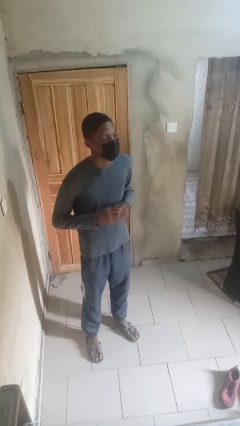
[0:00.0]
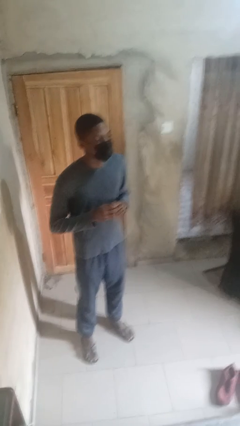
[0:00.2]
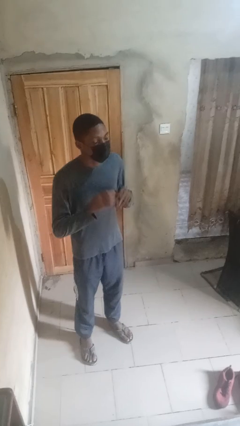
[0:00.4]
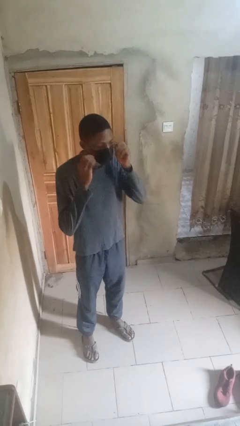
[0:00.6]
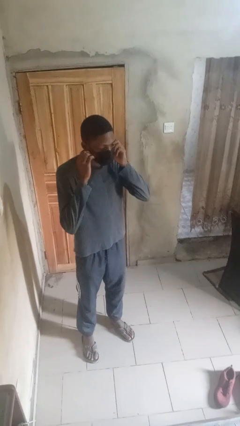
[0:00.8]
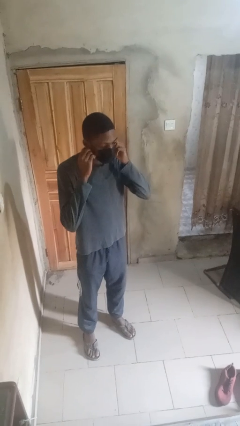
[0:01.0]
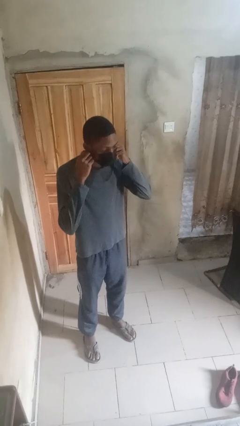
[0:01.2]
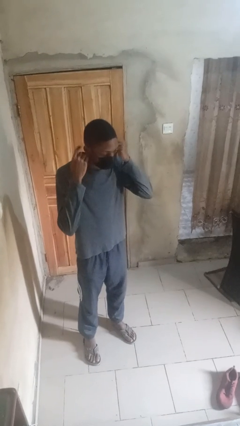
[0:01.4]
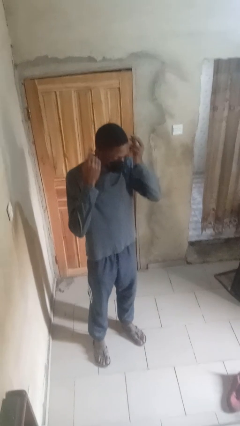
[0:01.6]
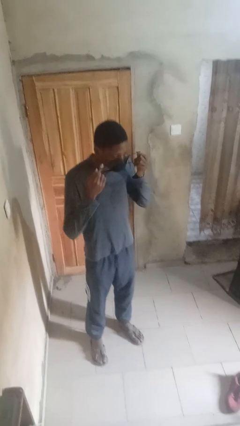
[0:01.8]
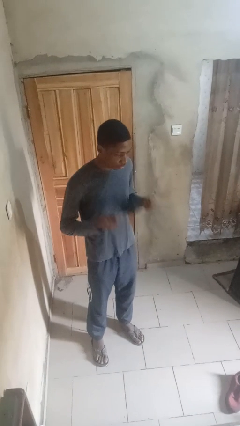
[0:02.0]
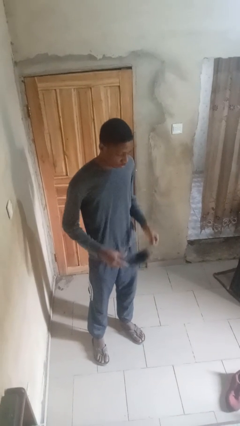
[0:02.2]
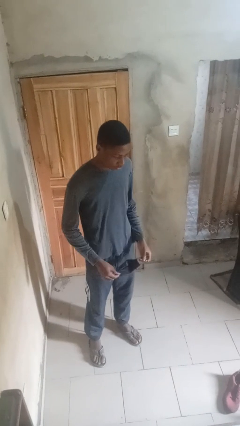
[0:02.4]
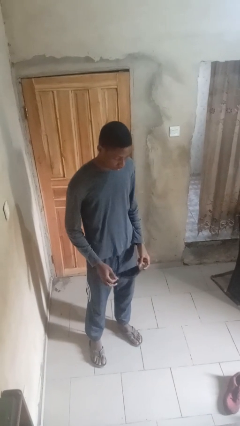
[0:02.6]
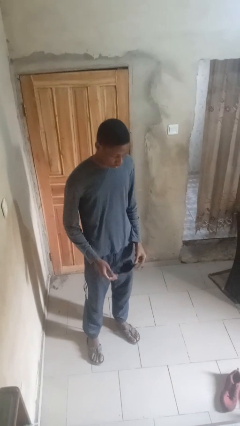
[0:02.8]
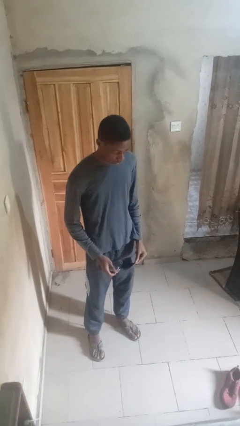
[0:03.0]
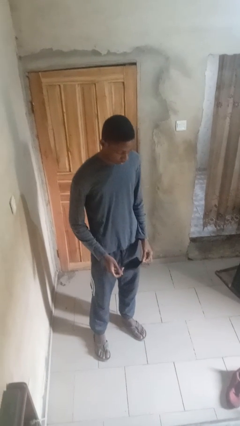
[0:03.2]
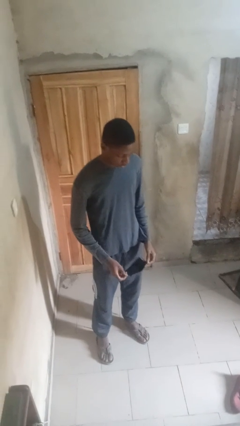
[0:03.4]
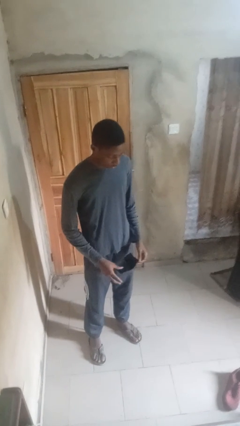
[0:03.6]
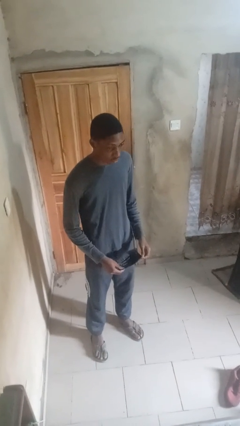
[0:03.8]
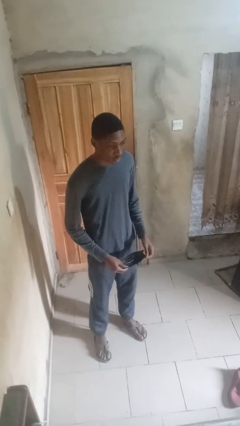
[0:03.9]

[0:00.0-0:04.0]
person takes off facemask

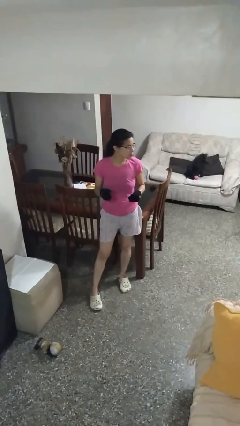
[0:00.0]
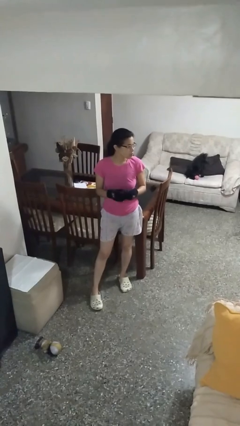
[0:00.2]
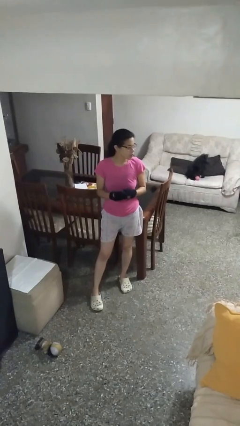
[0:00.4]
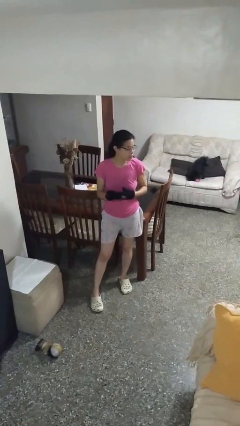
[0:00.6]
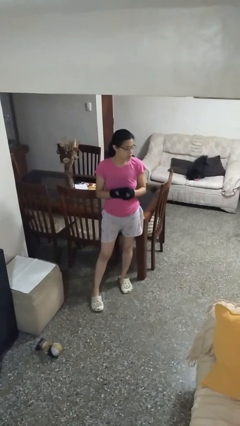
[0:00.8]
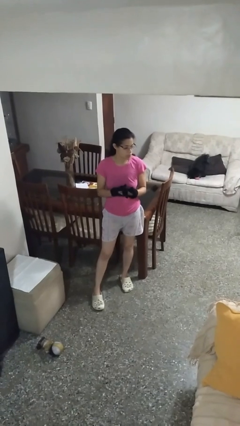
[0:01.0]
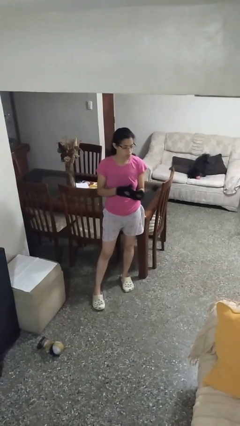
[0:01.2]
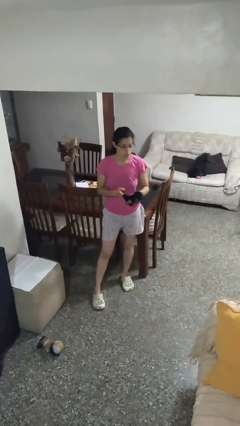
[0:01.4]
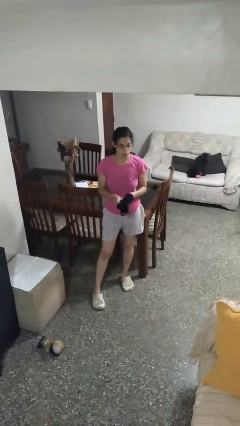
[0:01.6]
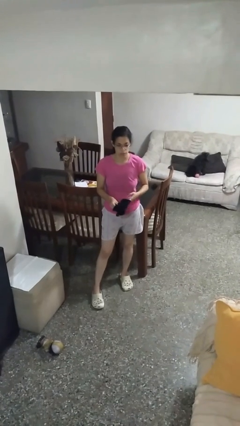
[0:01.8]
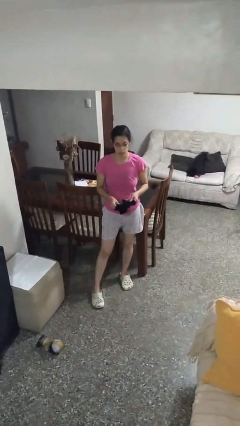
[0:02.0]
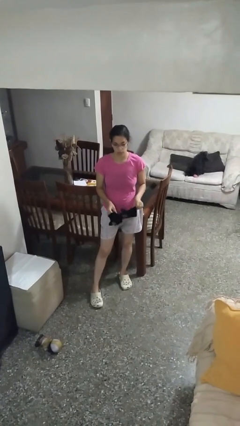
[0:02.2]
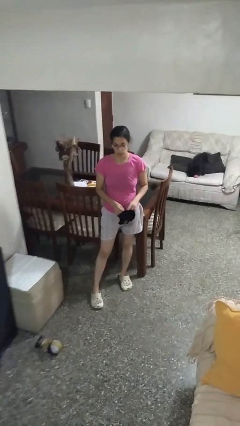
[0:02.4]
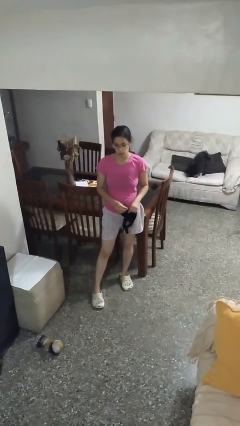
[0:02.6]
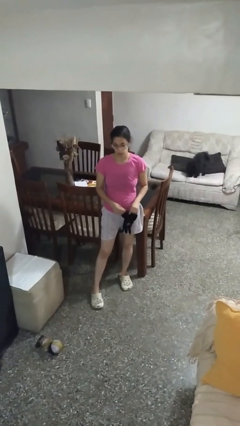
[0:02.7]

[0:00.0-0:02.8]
person takes off gloves

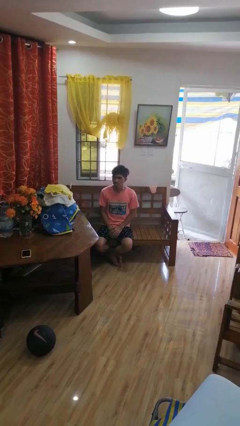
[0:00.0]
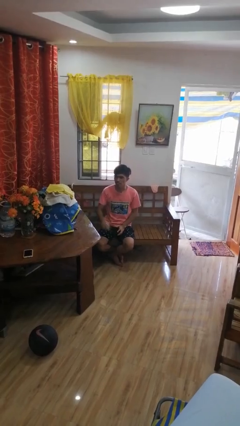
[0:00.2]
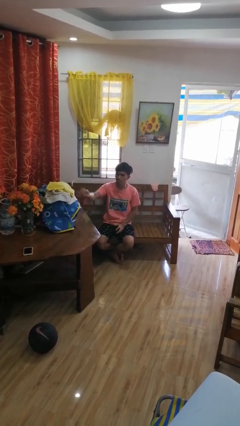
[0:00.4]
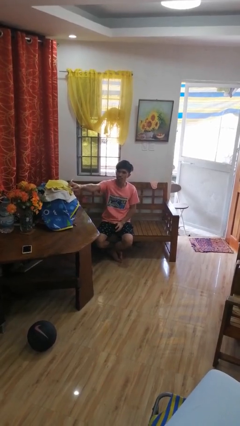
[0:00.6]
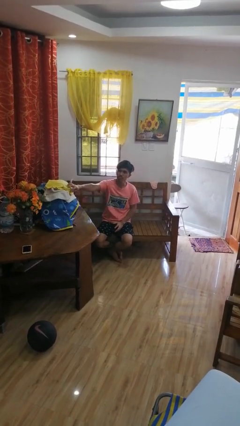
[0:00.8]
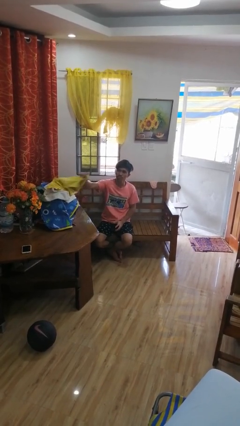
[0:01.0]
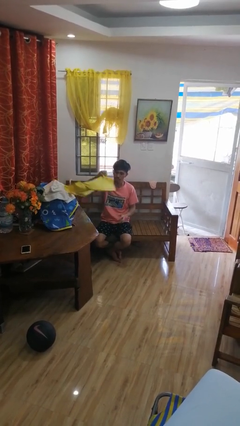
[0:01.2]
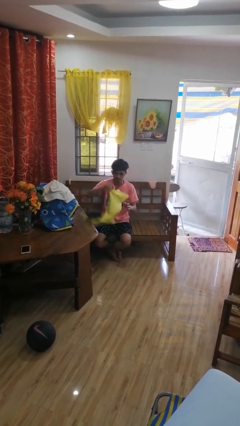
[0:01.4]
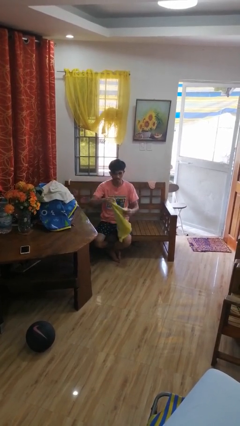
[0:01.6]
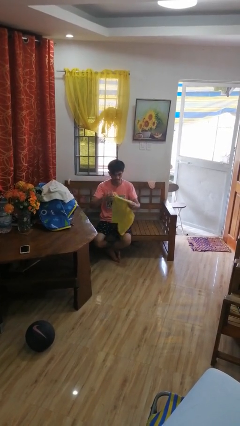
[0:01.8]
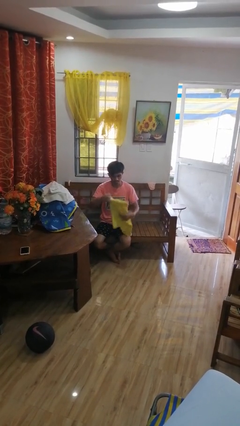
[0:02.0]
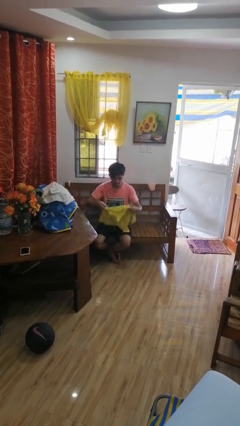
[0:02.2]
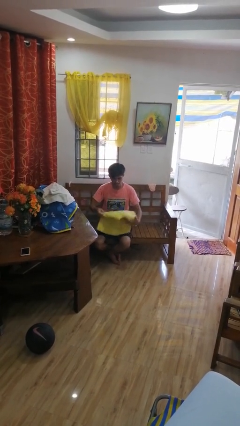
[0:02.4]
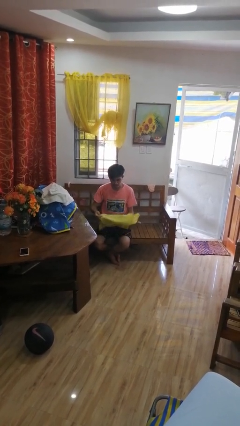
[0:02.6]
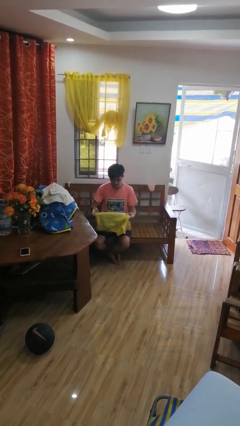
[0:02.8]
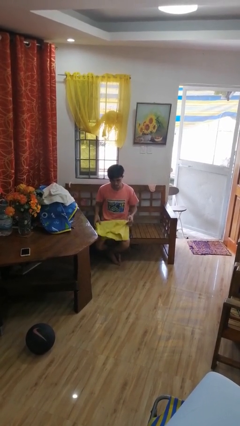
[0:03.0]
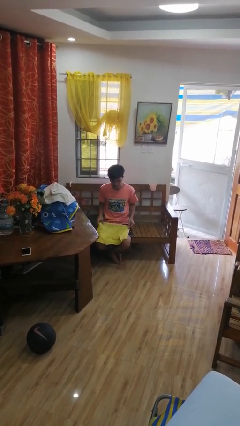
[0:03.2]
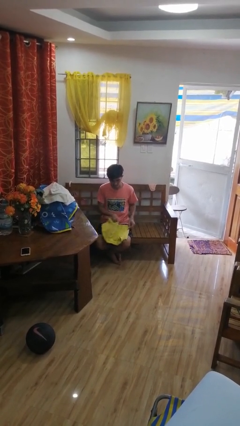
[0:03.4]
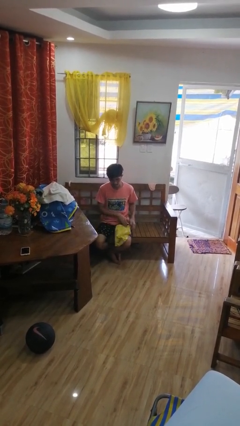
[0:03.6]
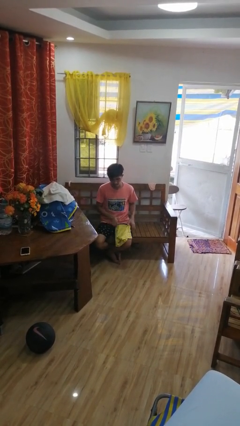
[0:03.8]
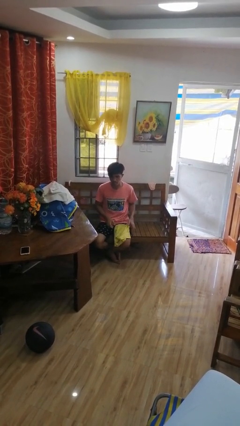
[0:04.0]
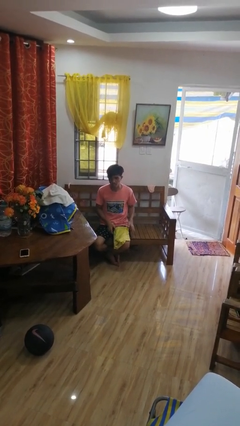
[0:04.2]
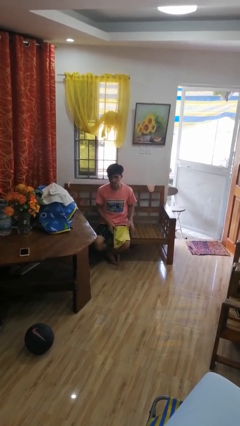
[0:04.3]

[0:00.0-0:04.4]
person folds shirt

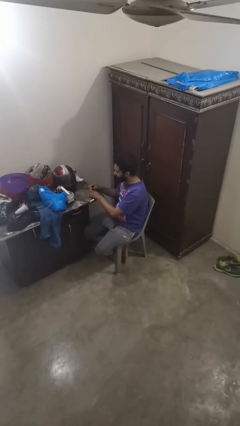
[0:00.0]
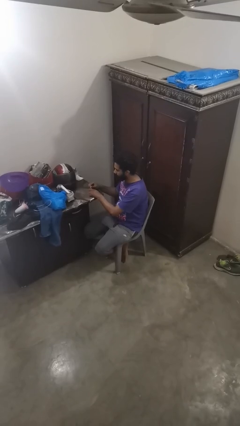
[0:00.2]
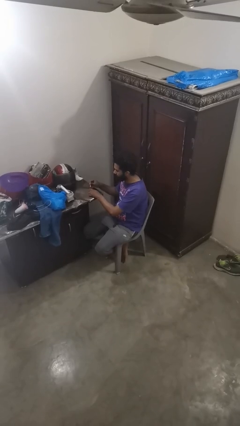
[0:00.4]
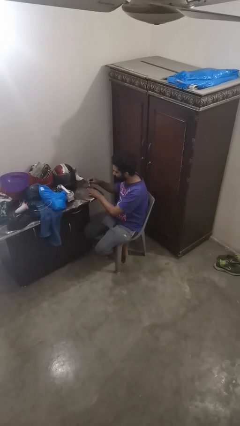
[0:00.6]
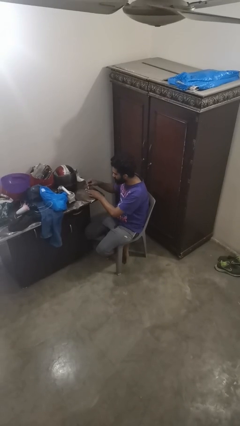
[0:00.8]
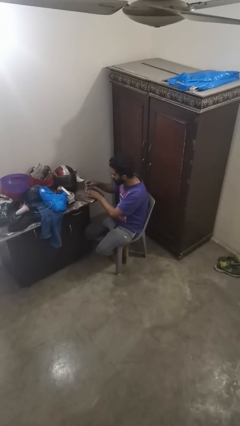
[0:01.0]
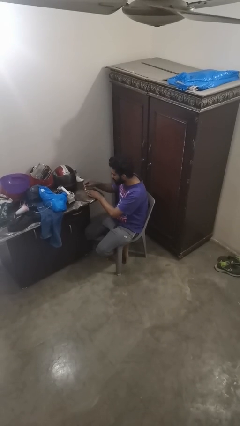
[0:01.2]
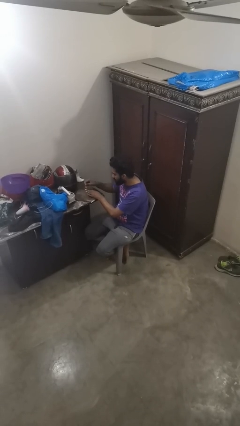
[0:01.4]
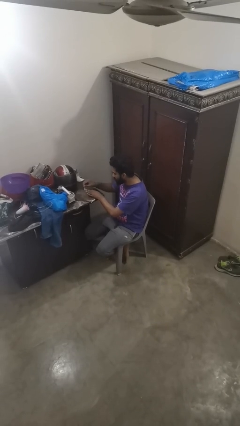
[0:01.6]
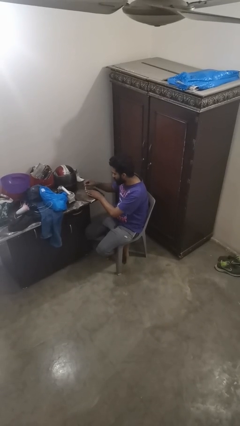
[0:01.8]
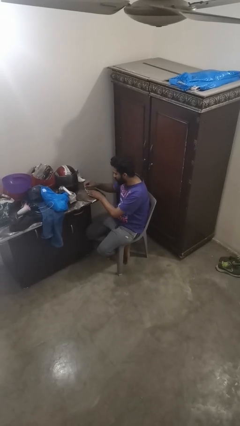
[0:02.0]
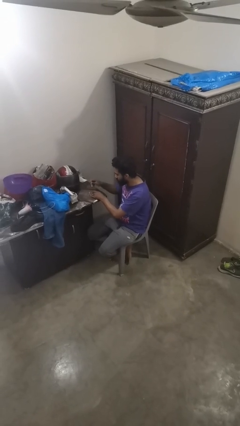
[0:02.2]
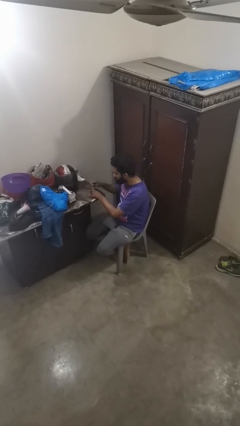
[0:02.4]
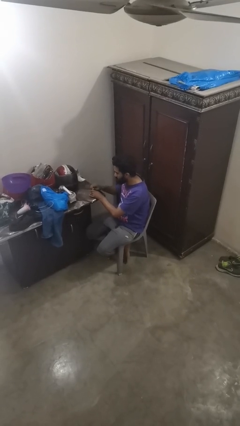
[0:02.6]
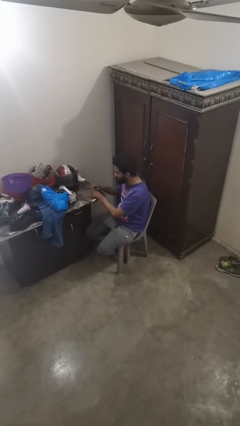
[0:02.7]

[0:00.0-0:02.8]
person paints fingernails

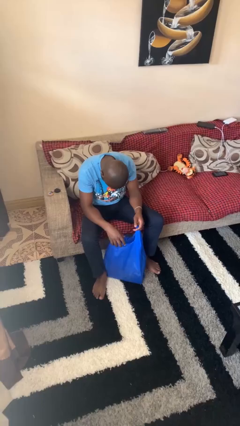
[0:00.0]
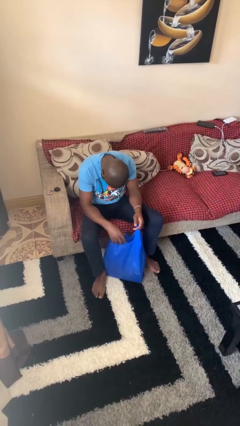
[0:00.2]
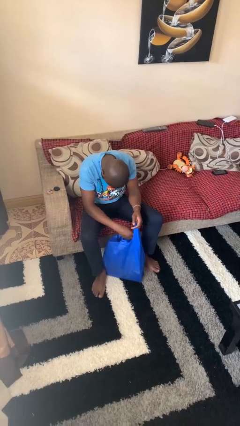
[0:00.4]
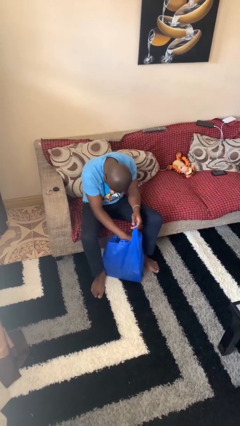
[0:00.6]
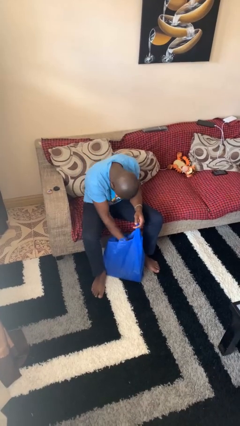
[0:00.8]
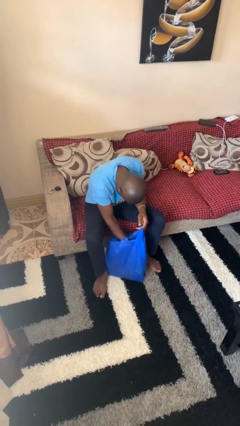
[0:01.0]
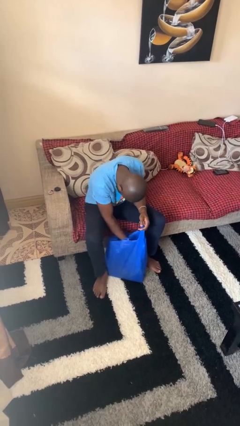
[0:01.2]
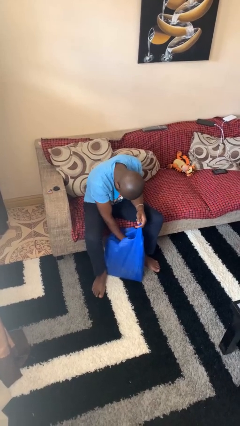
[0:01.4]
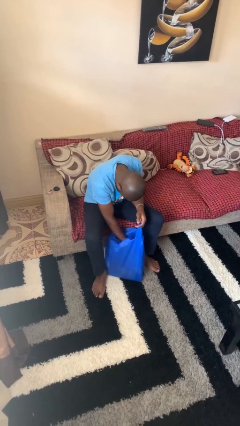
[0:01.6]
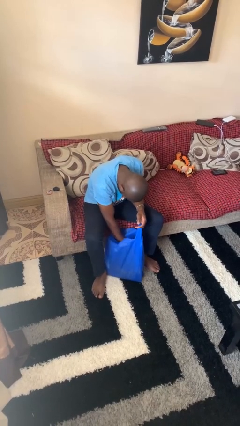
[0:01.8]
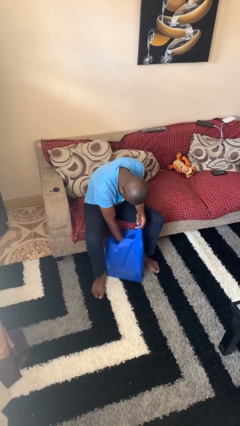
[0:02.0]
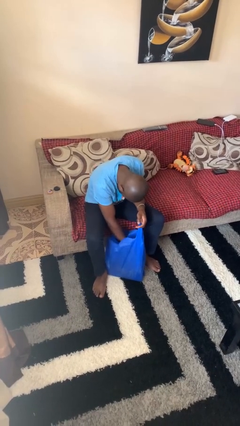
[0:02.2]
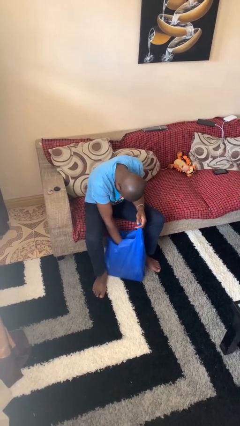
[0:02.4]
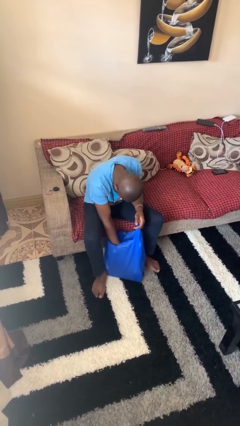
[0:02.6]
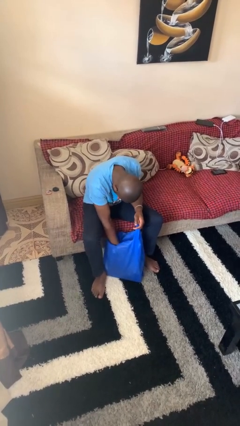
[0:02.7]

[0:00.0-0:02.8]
person searches in bag

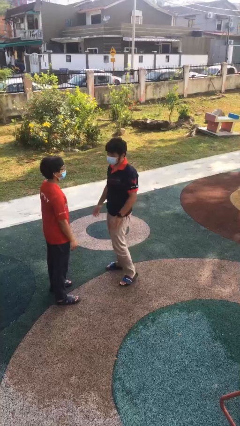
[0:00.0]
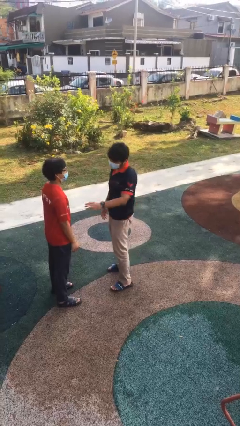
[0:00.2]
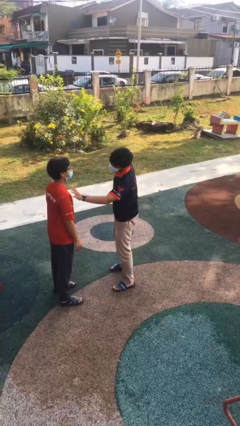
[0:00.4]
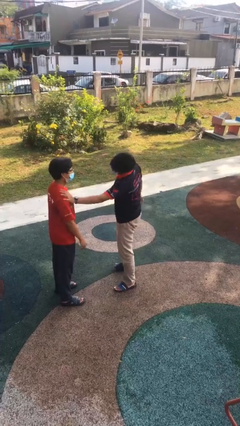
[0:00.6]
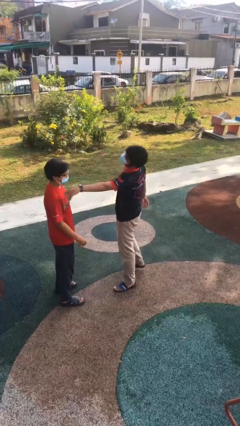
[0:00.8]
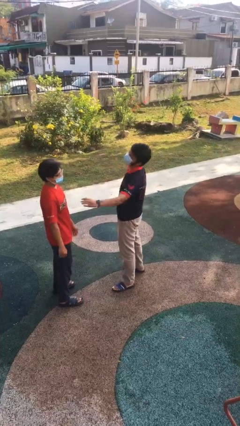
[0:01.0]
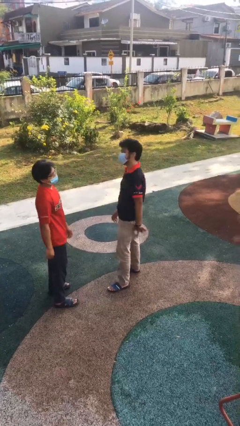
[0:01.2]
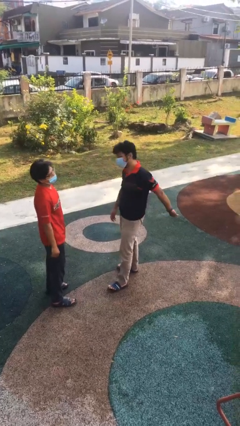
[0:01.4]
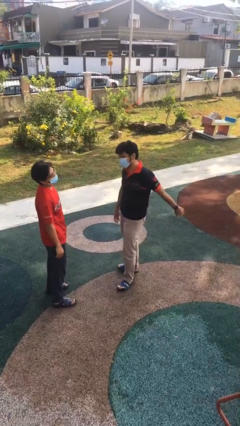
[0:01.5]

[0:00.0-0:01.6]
person shoves person
